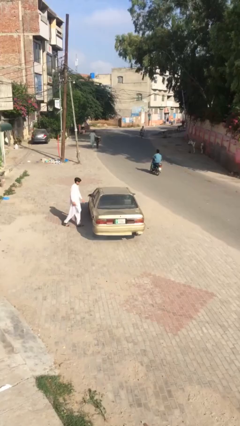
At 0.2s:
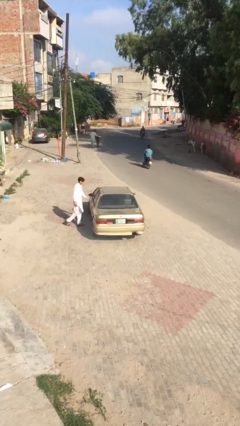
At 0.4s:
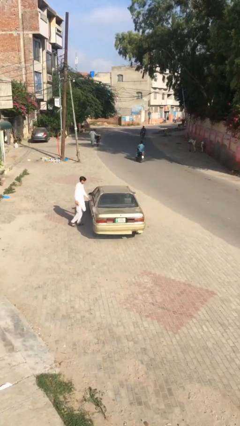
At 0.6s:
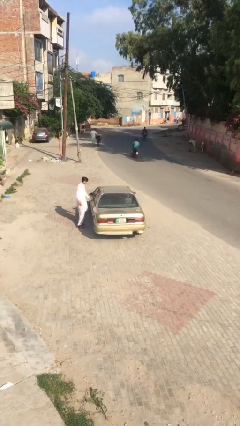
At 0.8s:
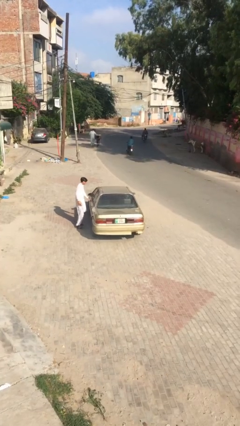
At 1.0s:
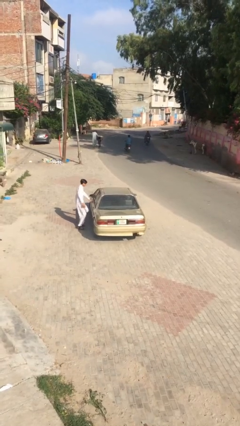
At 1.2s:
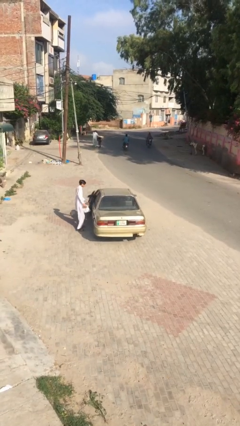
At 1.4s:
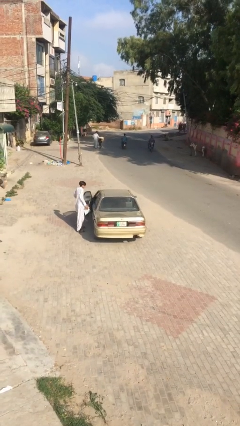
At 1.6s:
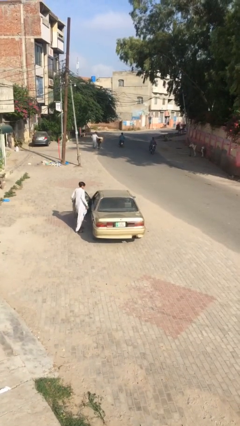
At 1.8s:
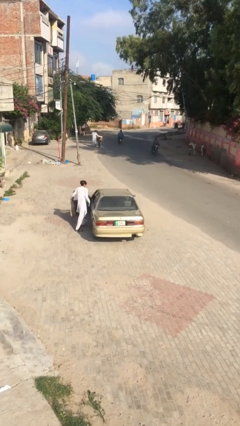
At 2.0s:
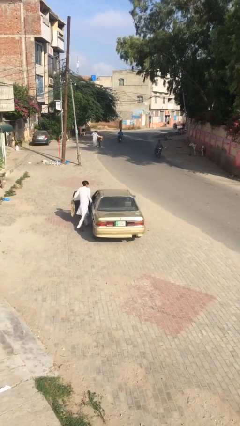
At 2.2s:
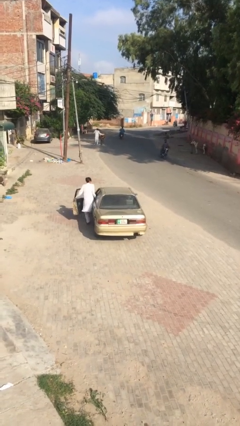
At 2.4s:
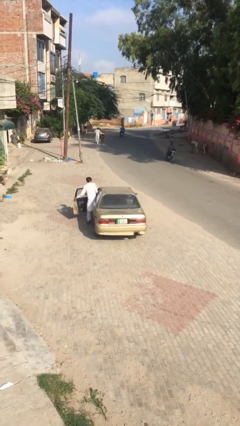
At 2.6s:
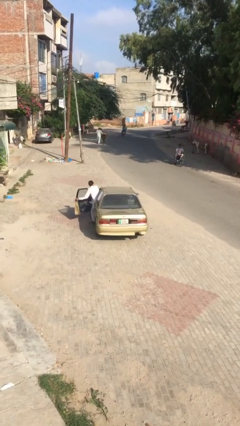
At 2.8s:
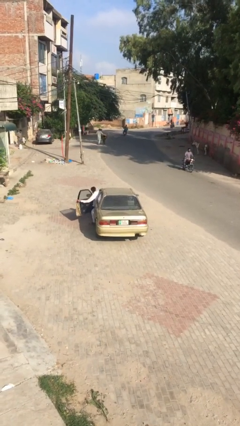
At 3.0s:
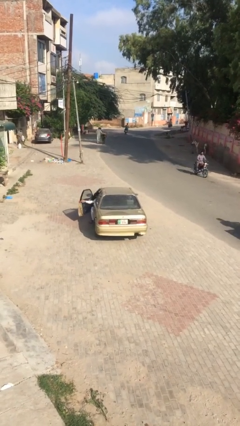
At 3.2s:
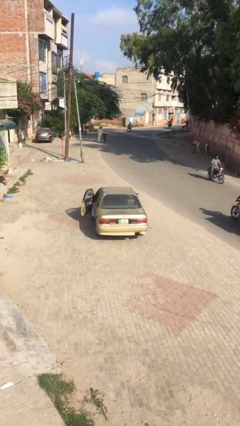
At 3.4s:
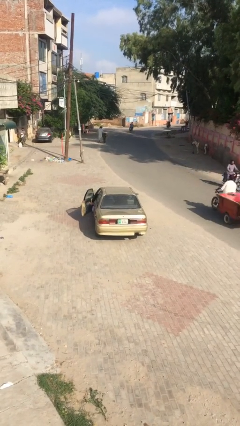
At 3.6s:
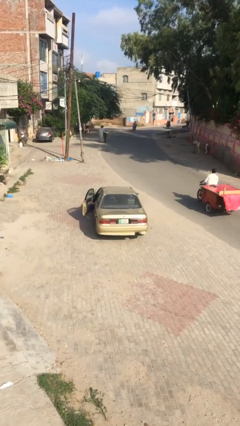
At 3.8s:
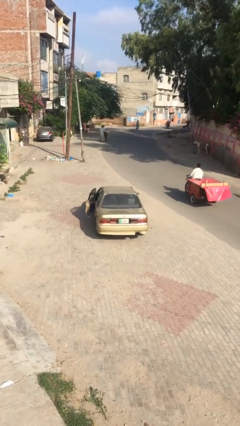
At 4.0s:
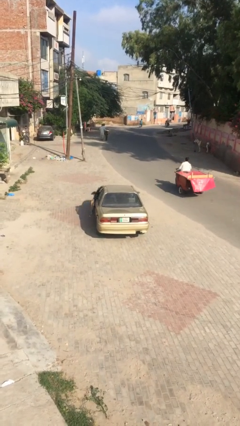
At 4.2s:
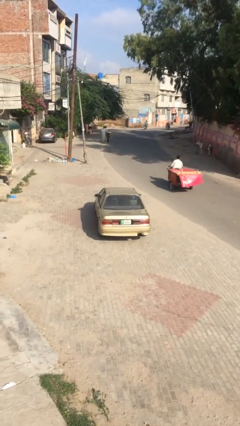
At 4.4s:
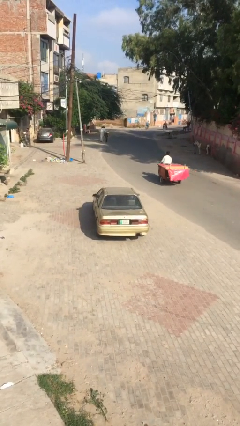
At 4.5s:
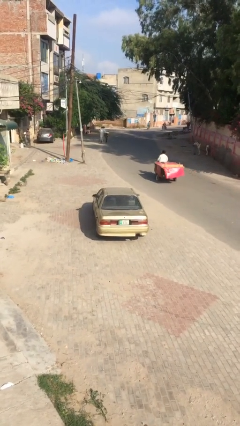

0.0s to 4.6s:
car picks up person

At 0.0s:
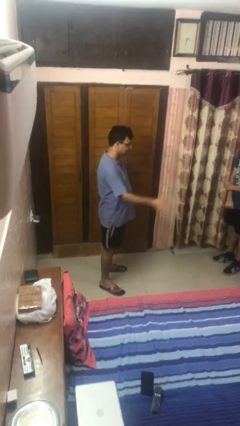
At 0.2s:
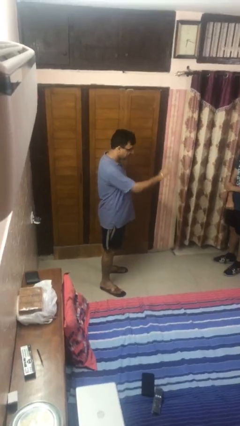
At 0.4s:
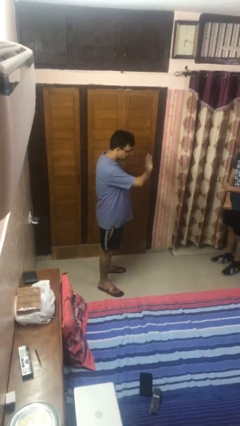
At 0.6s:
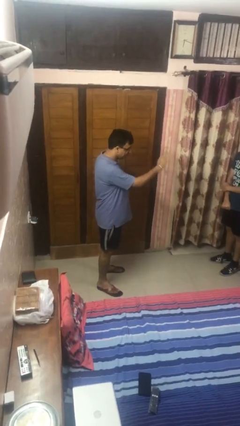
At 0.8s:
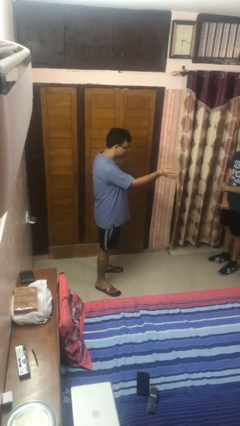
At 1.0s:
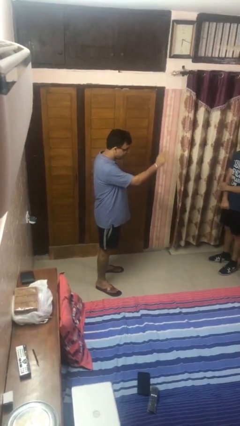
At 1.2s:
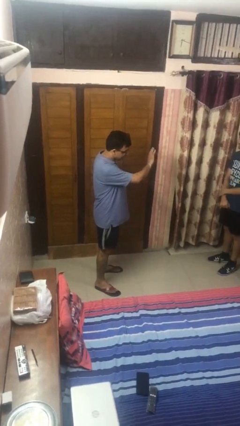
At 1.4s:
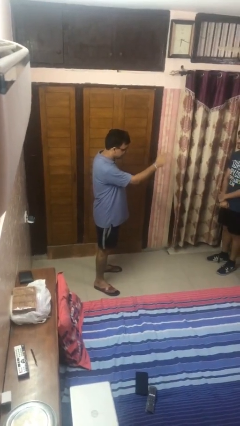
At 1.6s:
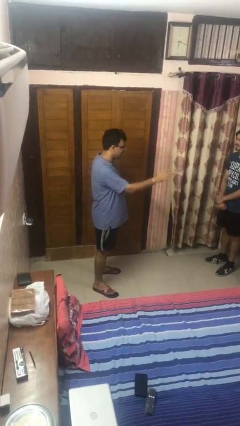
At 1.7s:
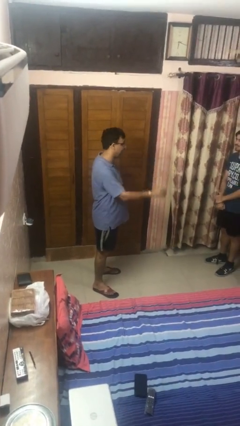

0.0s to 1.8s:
person waves at person

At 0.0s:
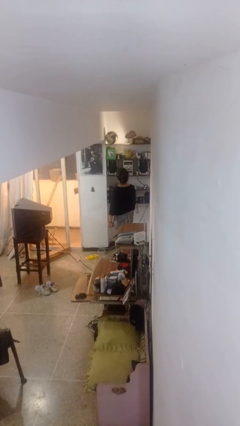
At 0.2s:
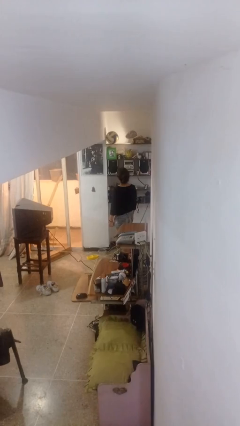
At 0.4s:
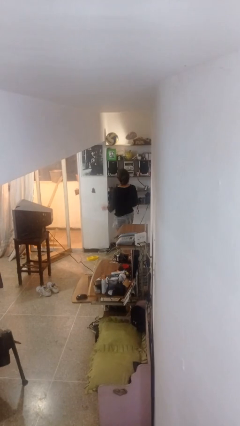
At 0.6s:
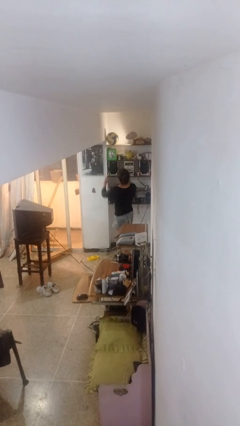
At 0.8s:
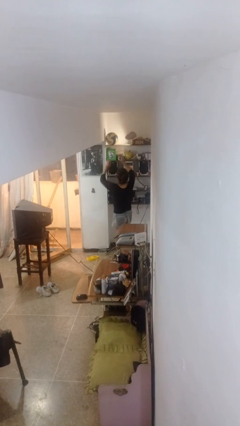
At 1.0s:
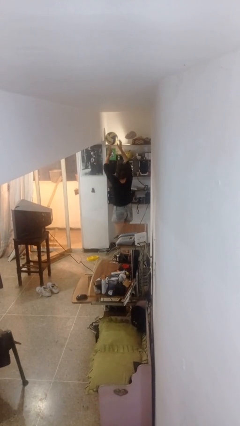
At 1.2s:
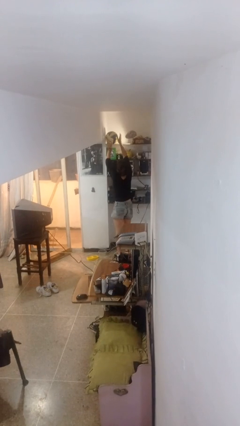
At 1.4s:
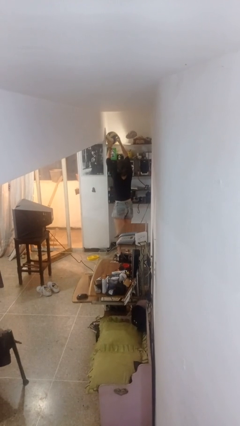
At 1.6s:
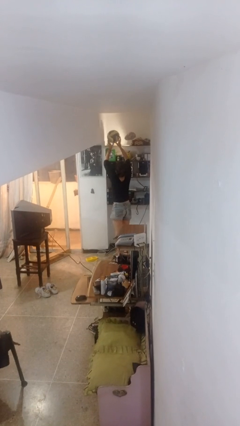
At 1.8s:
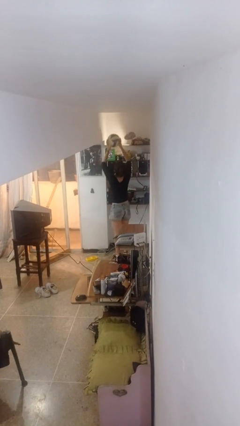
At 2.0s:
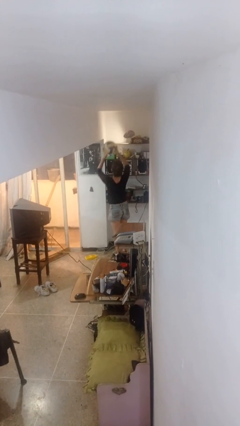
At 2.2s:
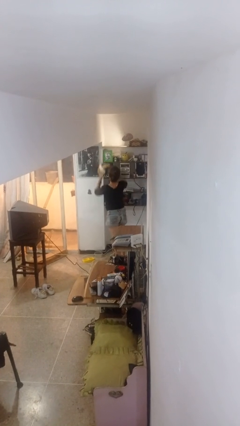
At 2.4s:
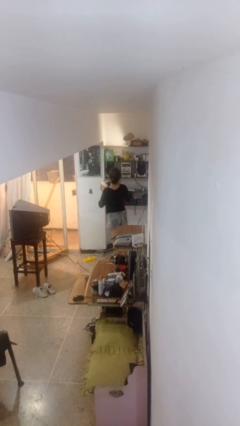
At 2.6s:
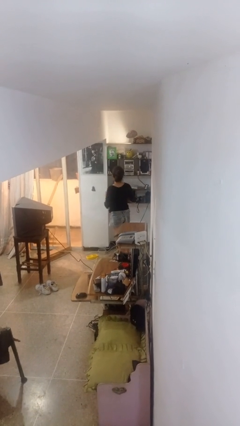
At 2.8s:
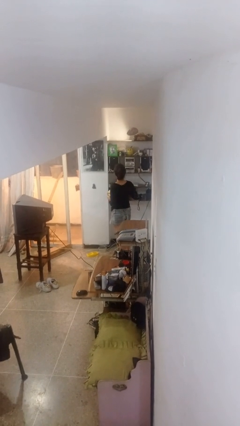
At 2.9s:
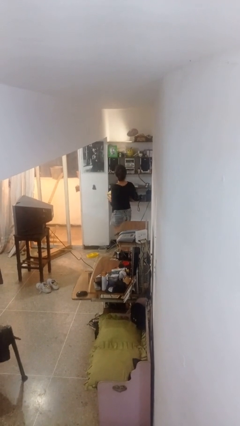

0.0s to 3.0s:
person picks up object from shelf

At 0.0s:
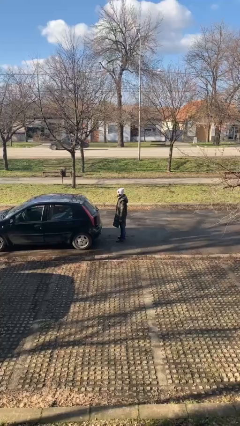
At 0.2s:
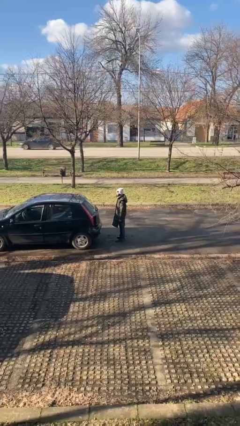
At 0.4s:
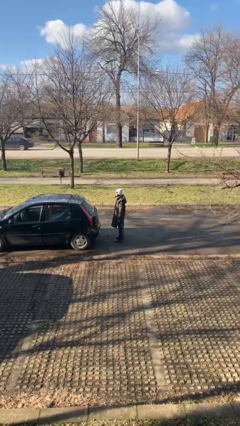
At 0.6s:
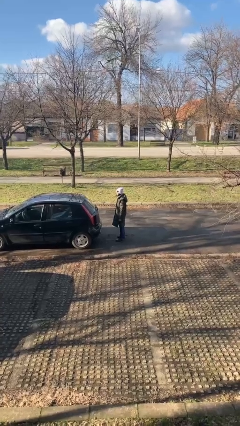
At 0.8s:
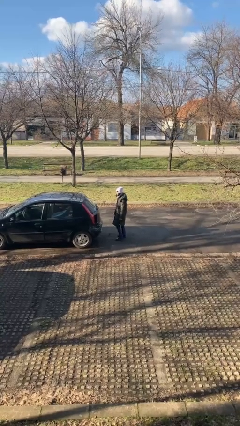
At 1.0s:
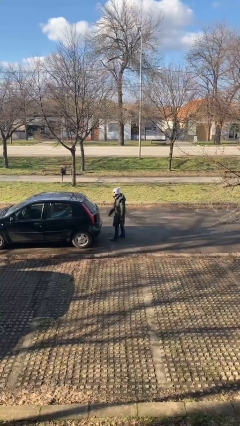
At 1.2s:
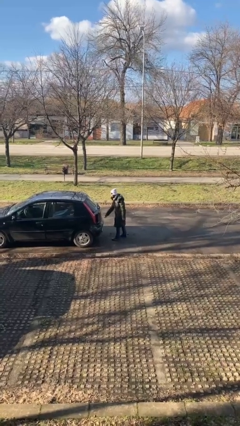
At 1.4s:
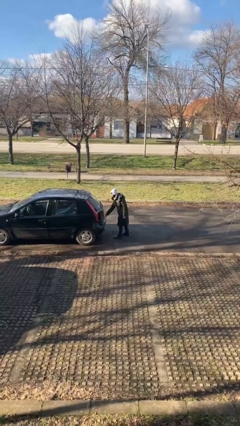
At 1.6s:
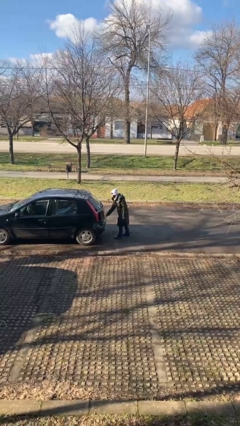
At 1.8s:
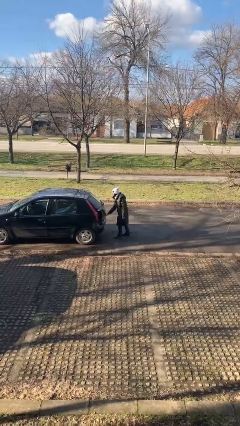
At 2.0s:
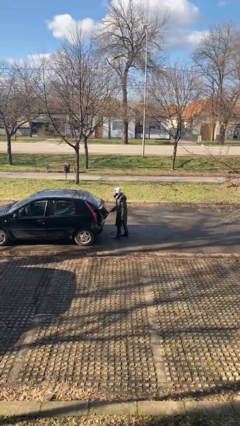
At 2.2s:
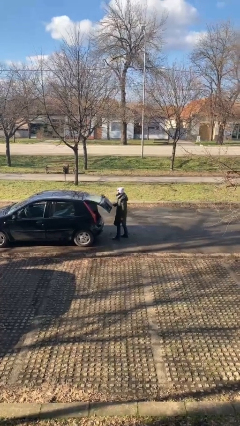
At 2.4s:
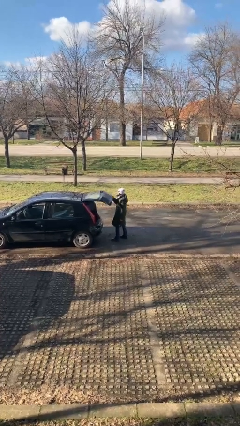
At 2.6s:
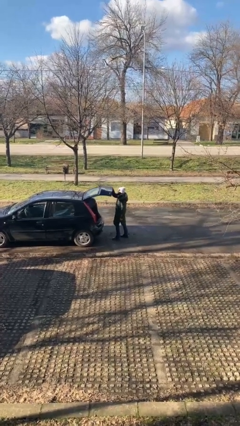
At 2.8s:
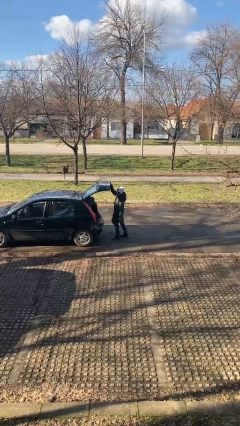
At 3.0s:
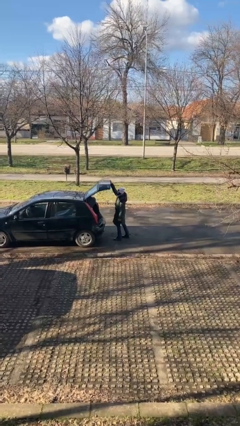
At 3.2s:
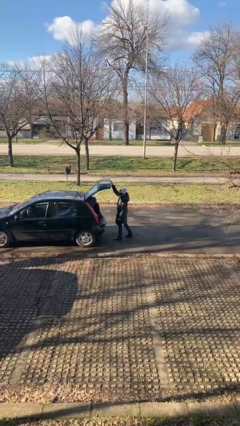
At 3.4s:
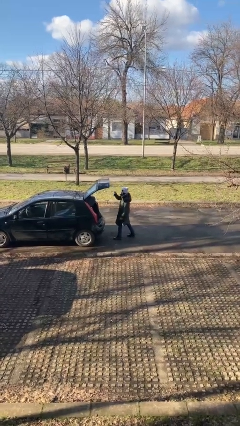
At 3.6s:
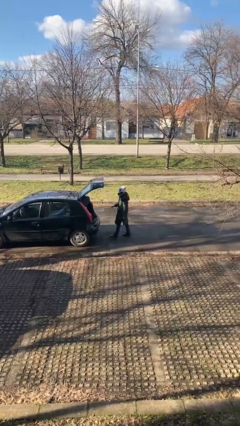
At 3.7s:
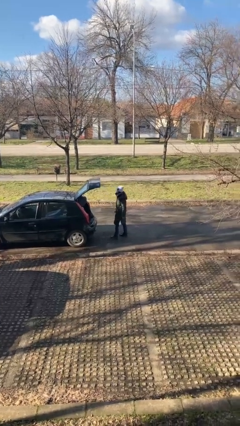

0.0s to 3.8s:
person opens car trunk

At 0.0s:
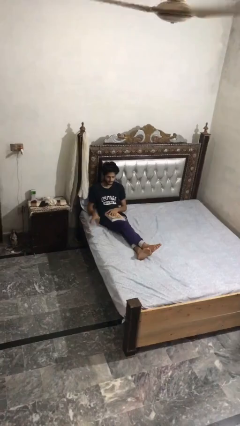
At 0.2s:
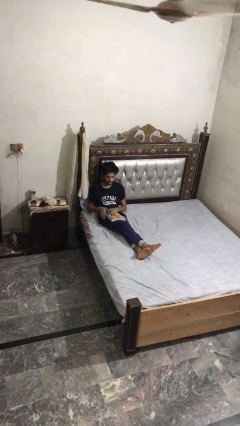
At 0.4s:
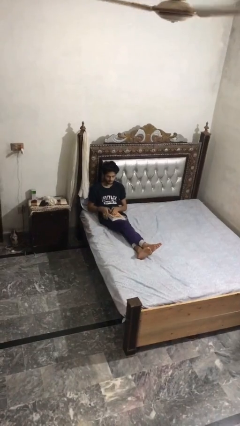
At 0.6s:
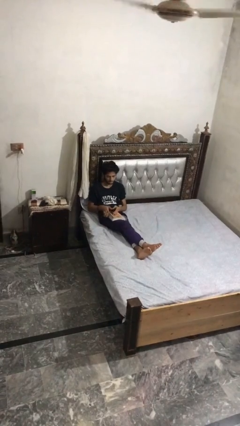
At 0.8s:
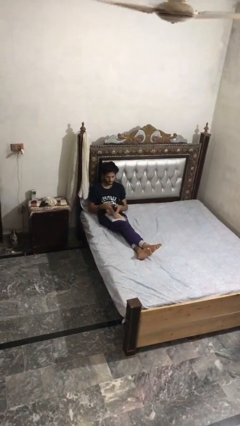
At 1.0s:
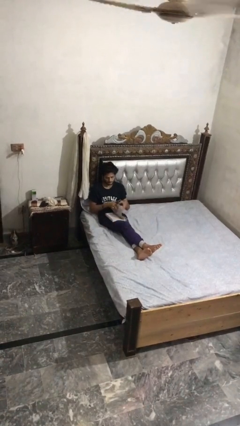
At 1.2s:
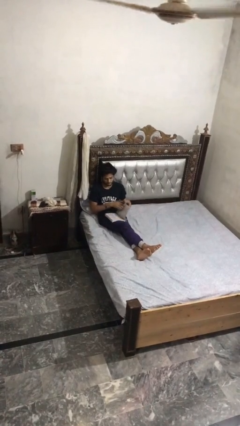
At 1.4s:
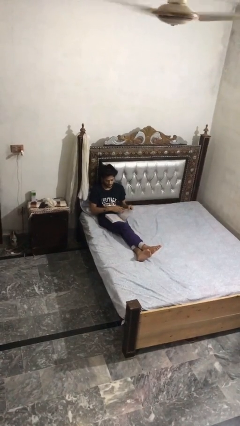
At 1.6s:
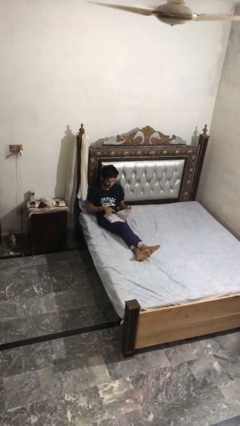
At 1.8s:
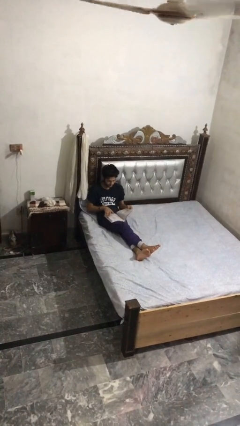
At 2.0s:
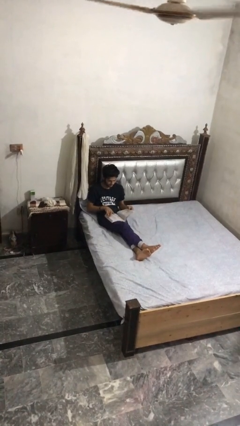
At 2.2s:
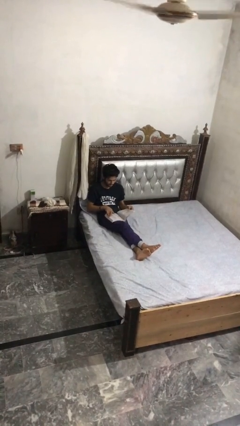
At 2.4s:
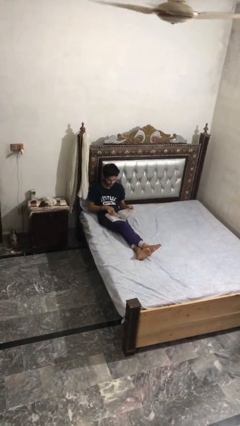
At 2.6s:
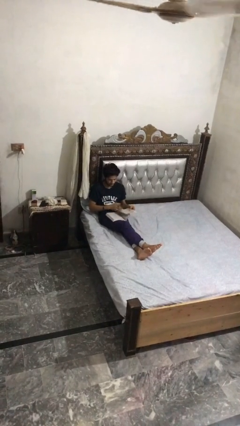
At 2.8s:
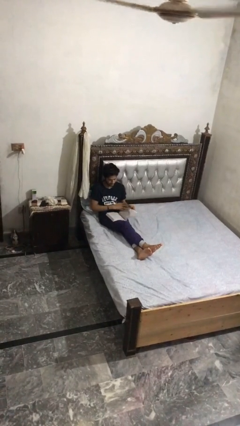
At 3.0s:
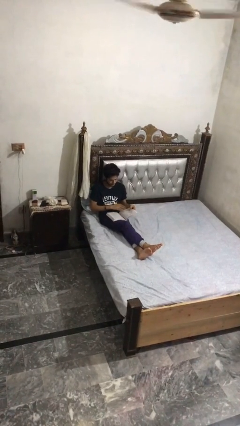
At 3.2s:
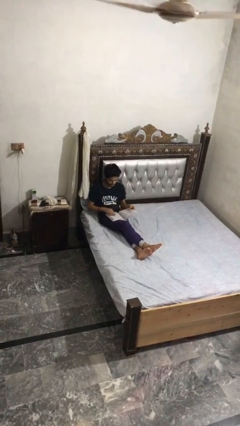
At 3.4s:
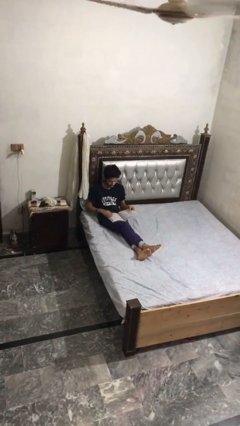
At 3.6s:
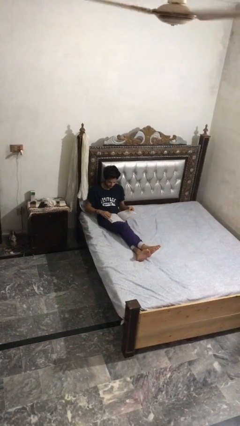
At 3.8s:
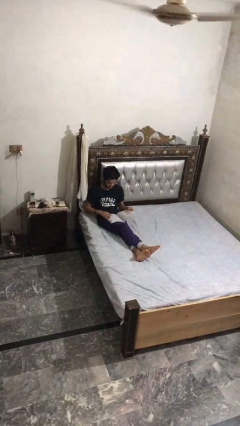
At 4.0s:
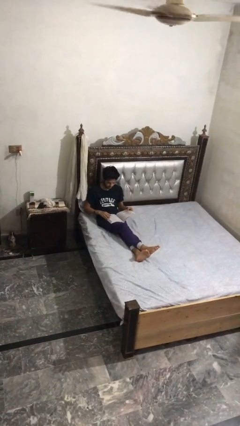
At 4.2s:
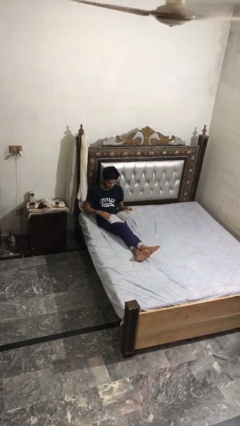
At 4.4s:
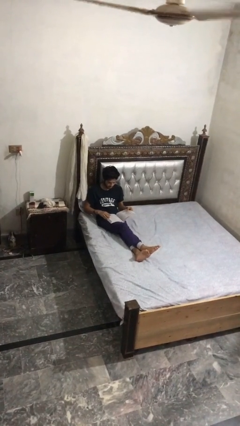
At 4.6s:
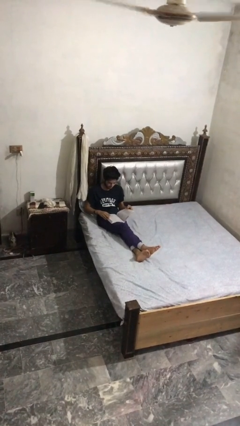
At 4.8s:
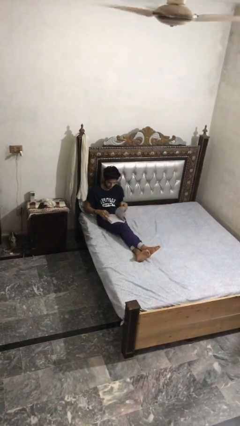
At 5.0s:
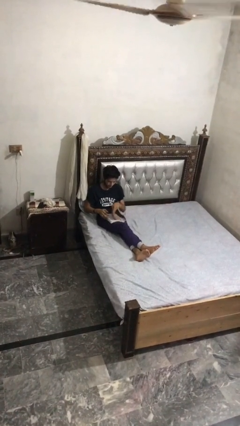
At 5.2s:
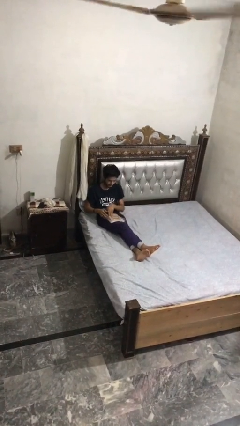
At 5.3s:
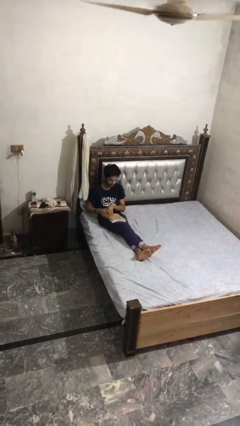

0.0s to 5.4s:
person reads book
